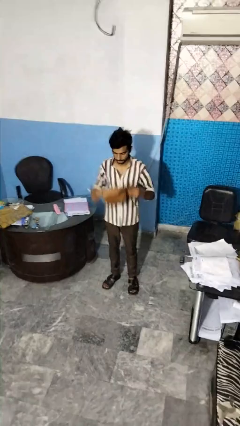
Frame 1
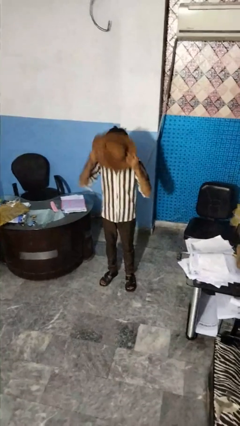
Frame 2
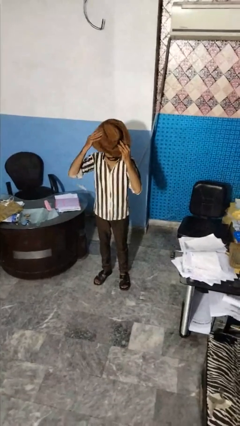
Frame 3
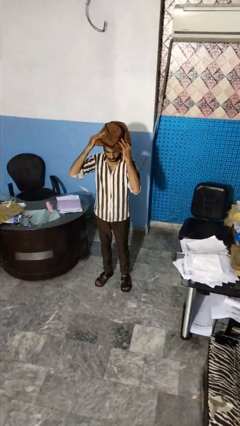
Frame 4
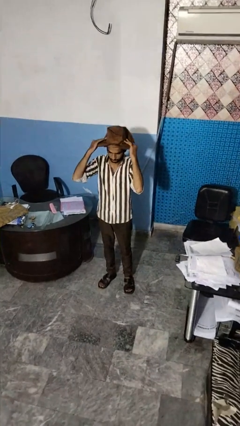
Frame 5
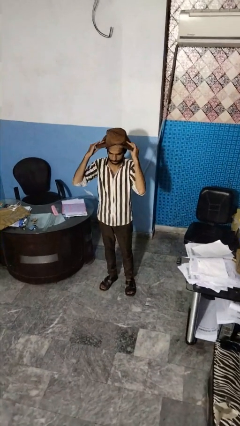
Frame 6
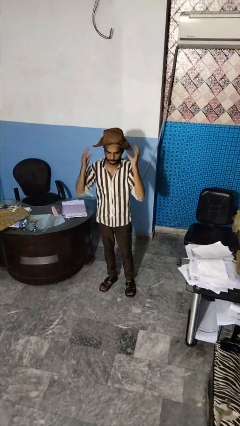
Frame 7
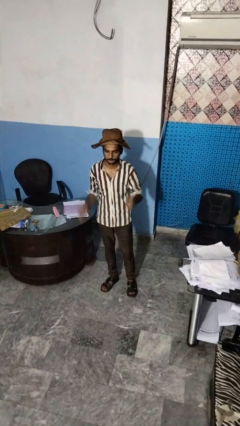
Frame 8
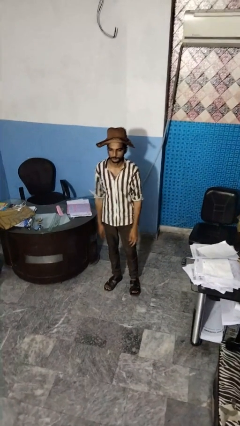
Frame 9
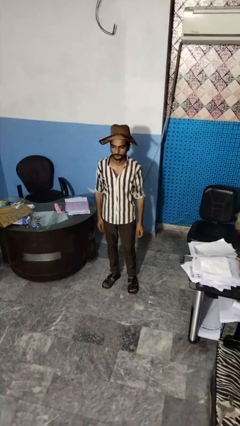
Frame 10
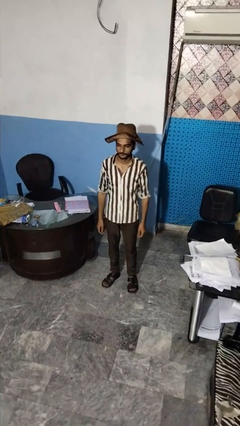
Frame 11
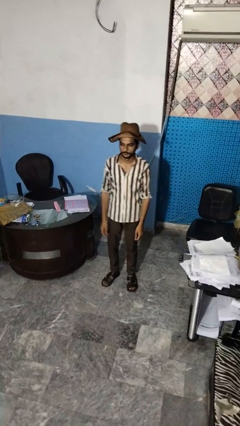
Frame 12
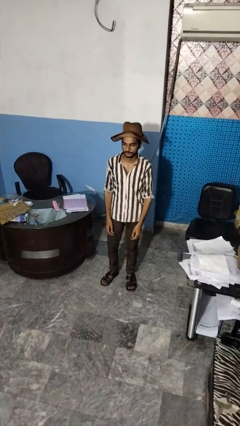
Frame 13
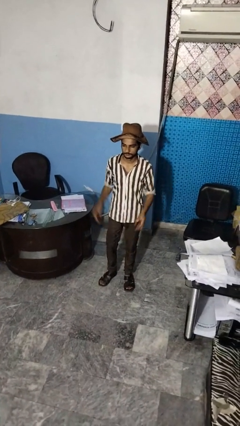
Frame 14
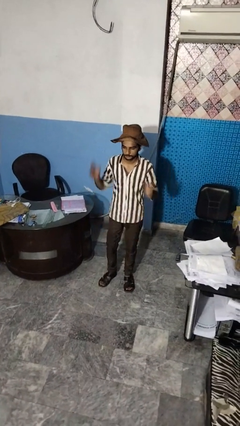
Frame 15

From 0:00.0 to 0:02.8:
person puts on hat

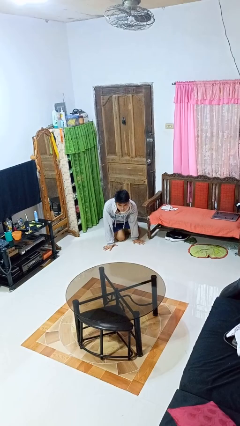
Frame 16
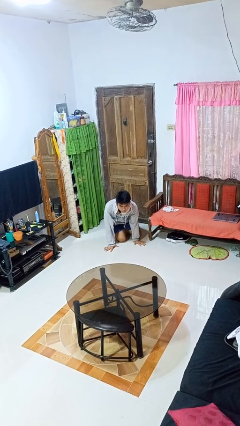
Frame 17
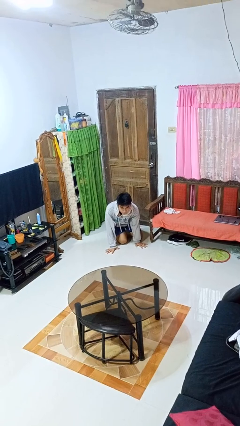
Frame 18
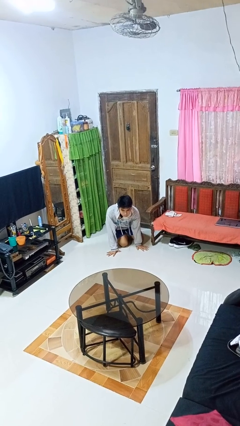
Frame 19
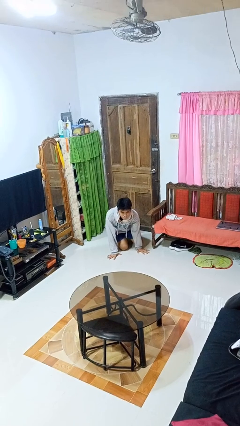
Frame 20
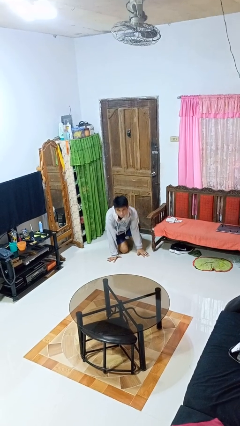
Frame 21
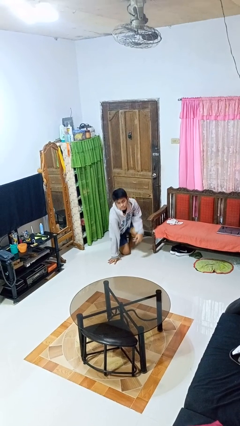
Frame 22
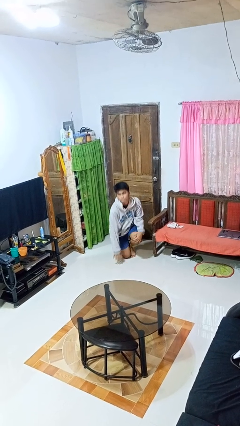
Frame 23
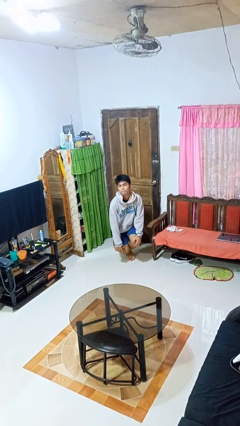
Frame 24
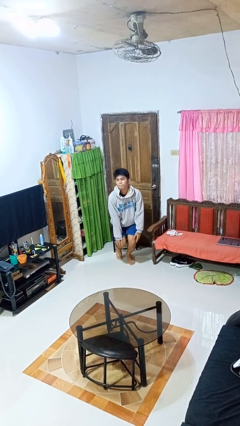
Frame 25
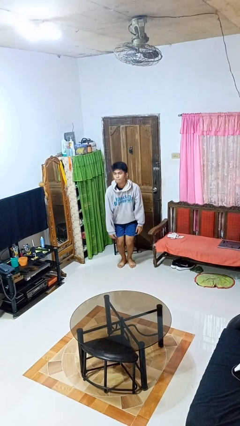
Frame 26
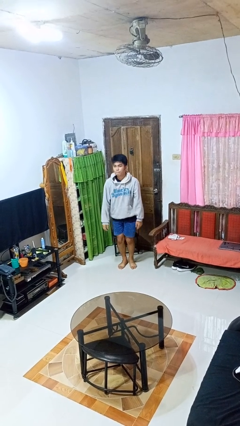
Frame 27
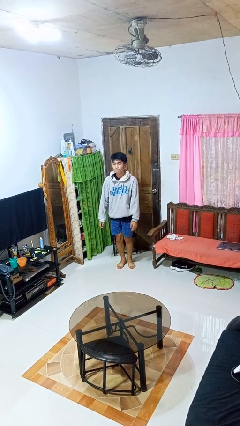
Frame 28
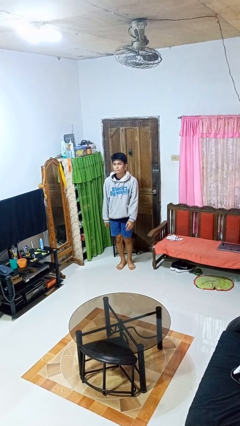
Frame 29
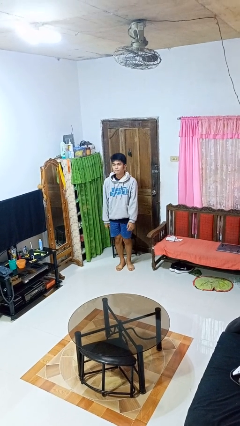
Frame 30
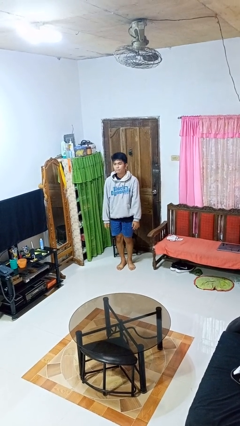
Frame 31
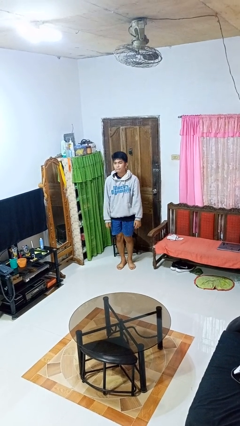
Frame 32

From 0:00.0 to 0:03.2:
person stands up from floor

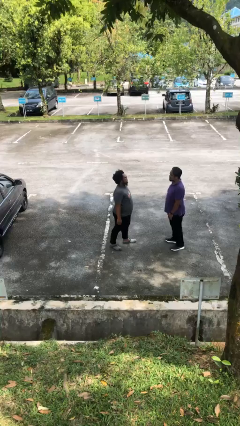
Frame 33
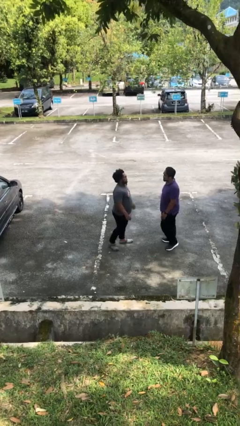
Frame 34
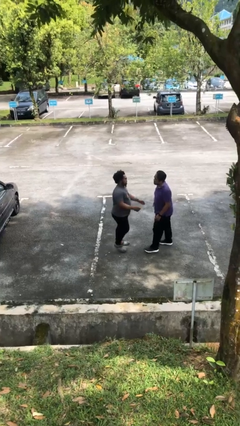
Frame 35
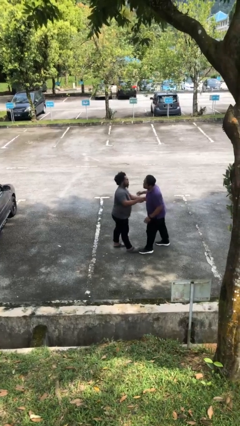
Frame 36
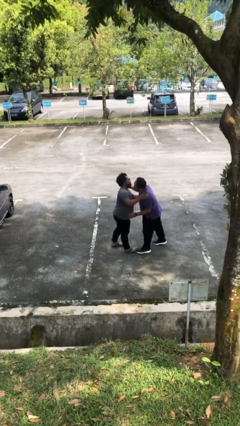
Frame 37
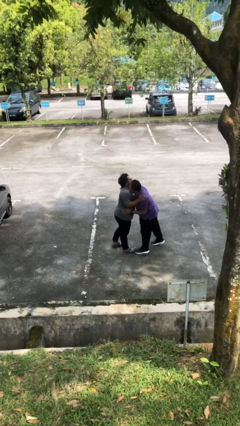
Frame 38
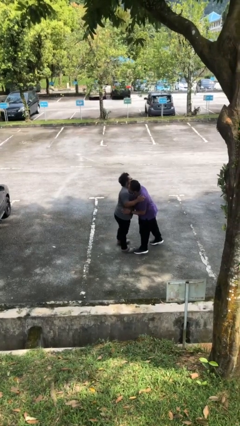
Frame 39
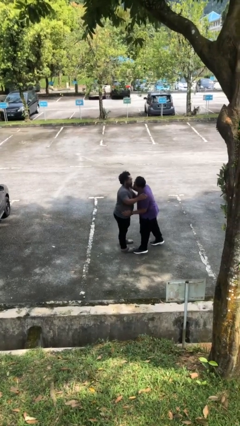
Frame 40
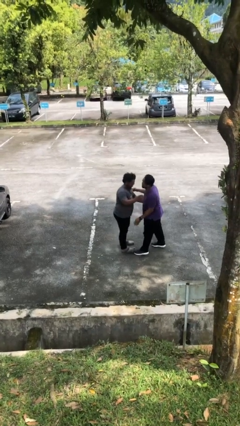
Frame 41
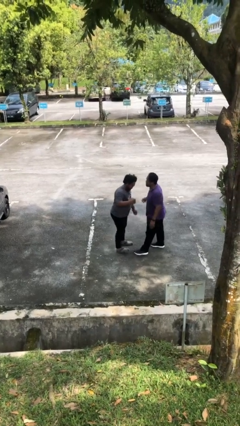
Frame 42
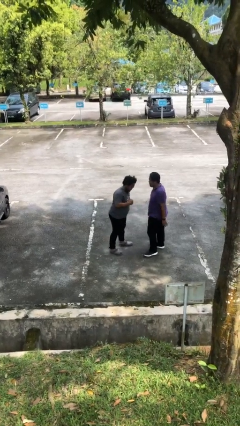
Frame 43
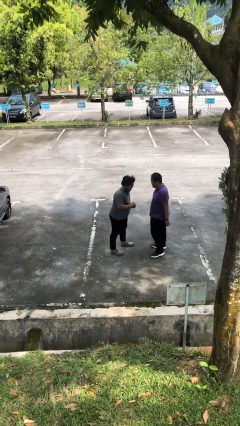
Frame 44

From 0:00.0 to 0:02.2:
person embraces person

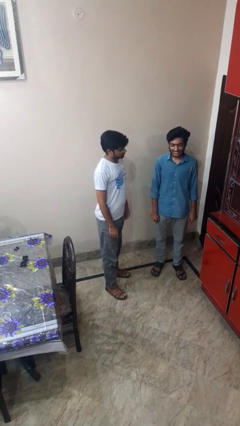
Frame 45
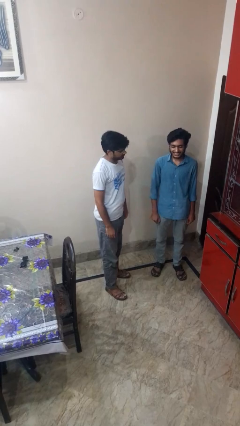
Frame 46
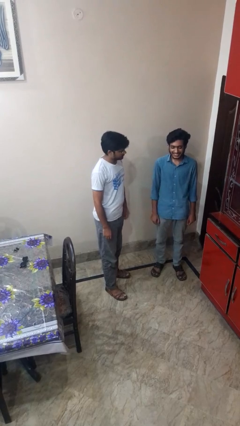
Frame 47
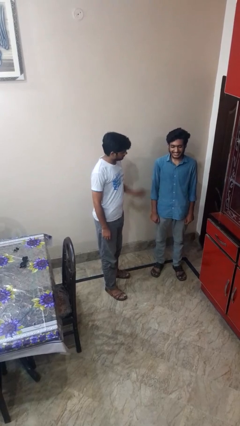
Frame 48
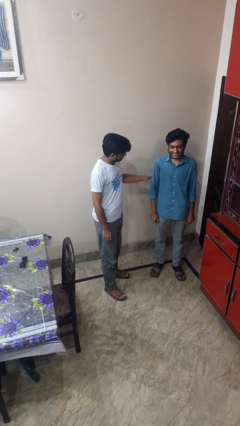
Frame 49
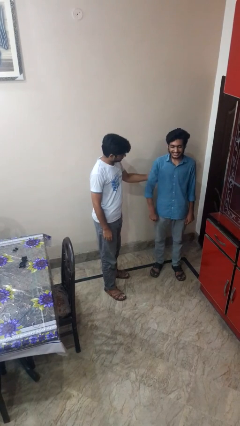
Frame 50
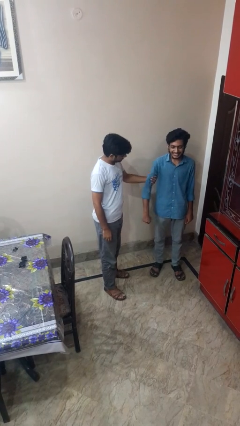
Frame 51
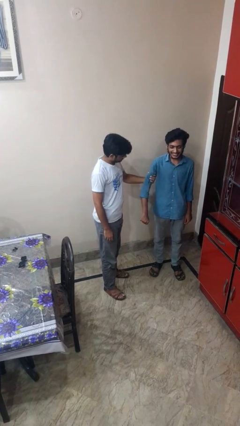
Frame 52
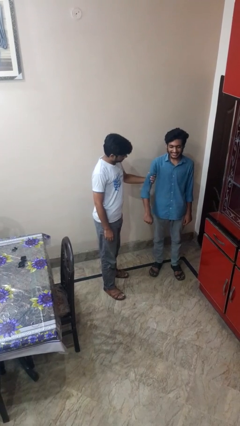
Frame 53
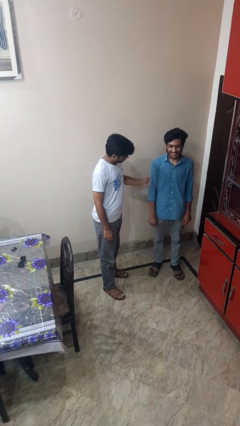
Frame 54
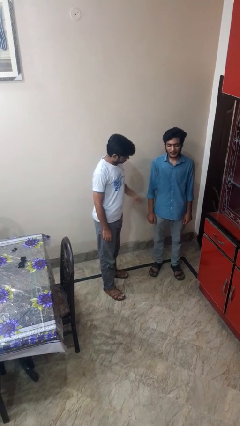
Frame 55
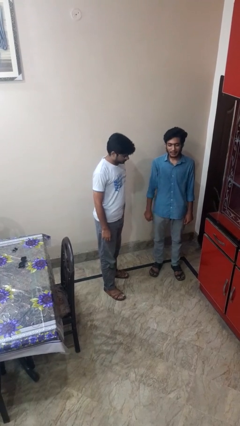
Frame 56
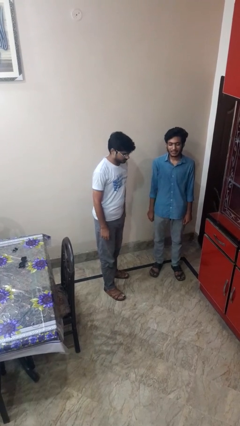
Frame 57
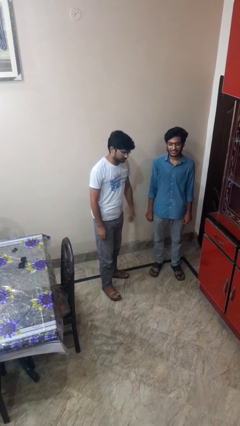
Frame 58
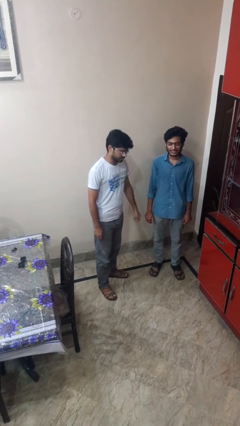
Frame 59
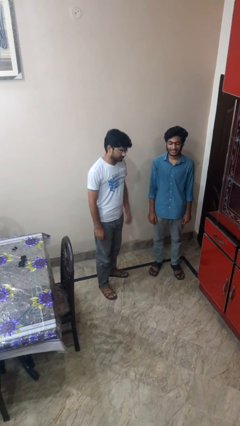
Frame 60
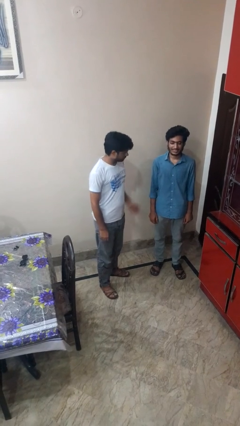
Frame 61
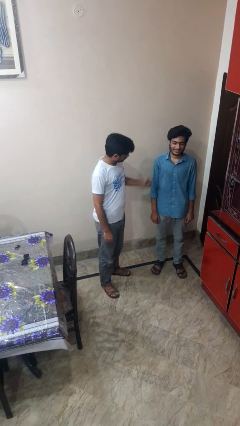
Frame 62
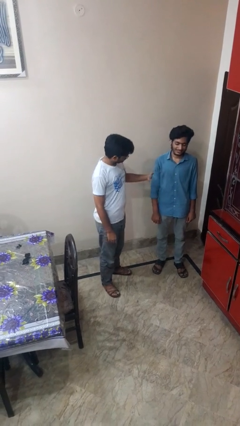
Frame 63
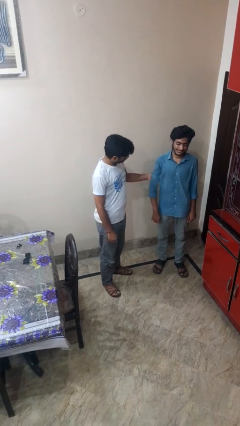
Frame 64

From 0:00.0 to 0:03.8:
person searches in backpack

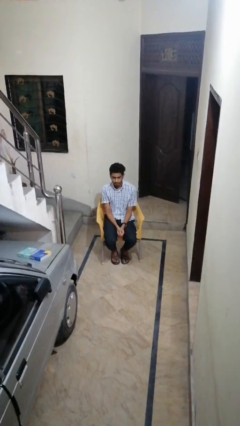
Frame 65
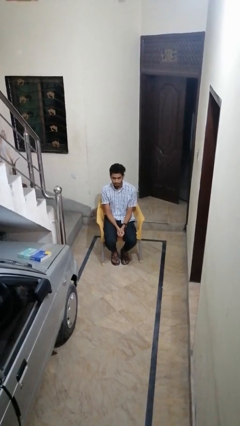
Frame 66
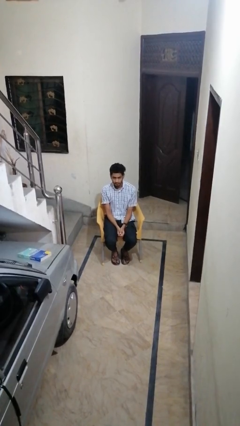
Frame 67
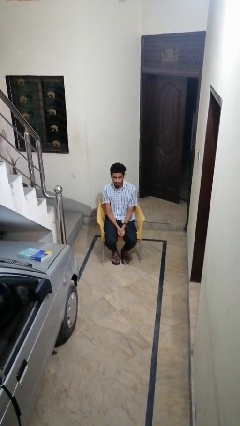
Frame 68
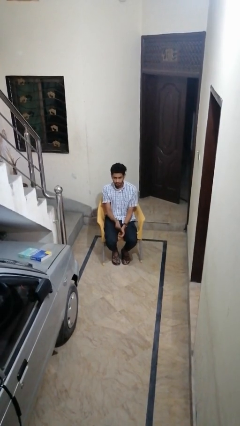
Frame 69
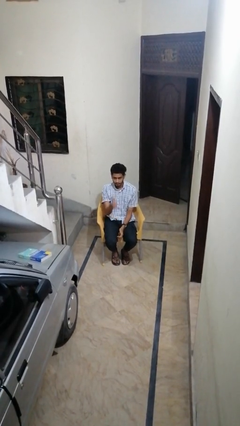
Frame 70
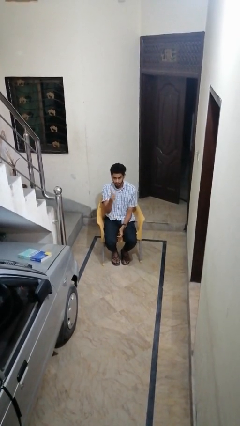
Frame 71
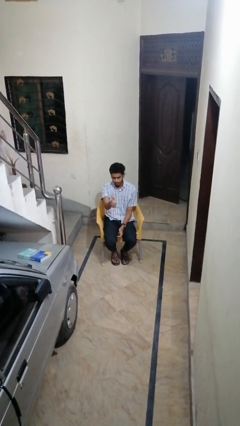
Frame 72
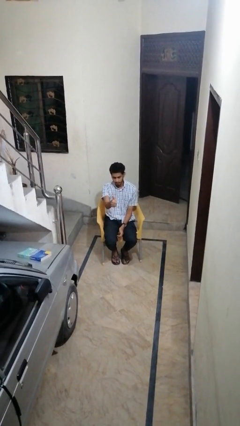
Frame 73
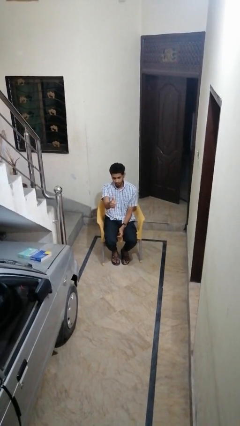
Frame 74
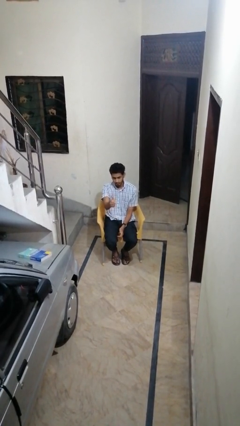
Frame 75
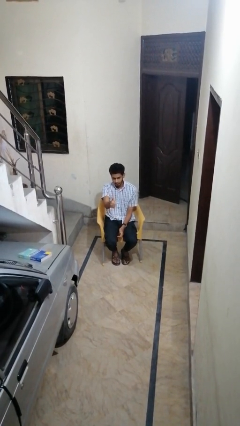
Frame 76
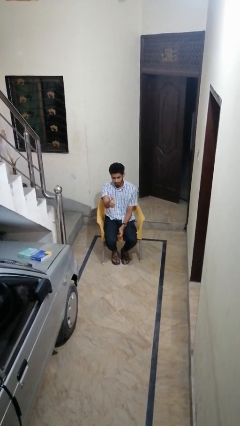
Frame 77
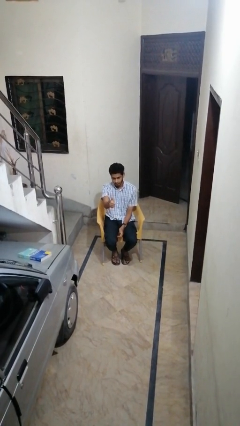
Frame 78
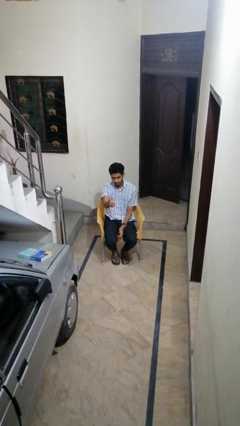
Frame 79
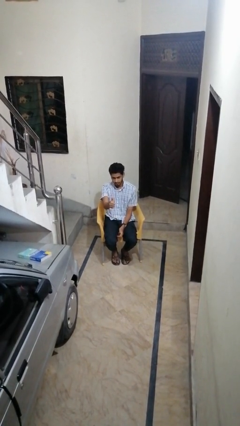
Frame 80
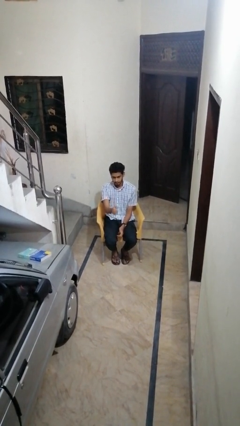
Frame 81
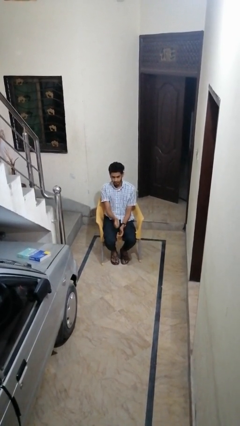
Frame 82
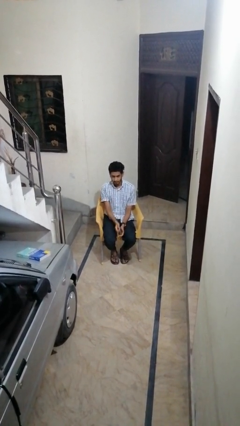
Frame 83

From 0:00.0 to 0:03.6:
person gestures thumbs up

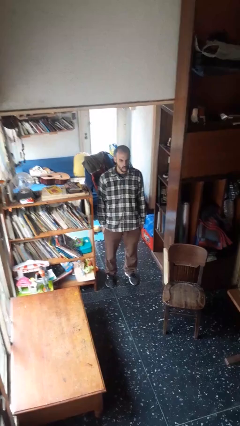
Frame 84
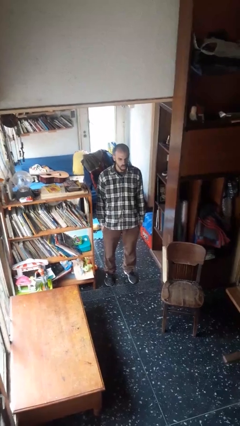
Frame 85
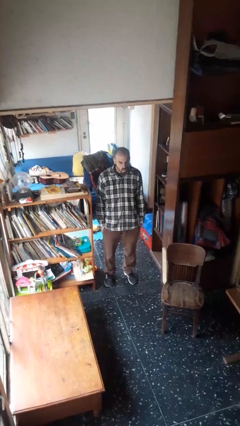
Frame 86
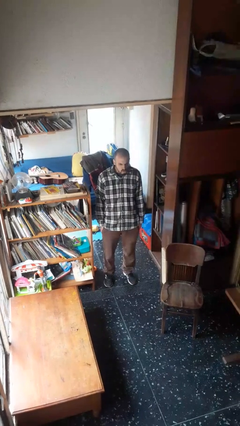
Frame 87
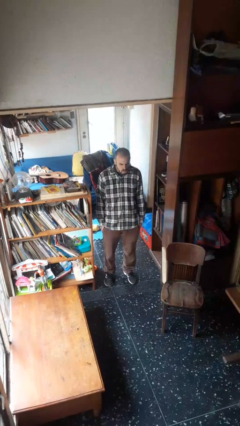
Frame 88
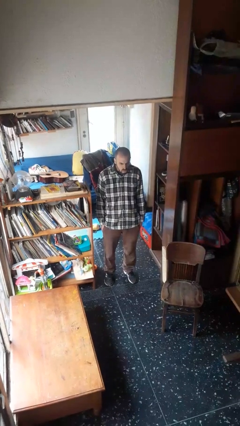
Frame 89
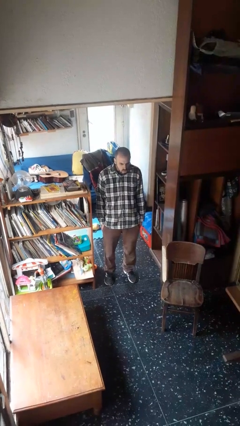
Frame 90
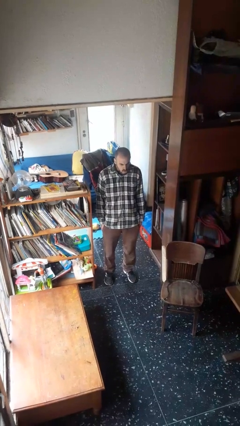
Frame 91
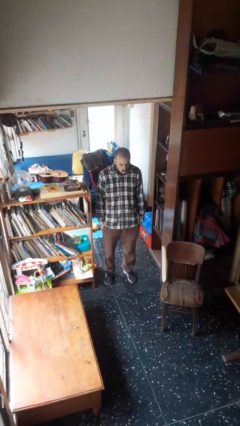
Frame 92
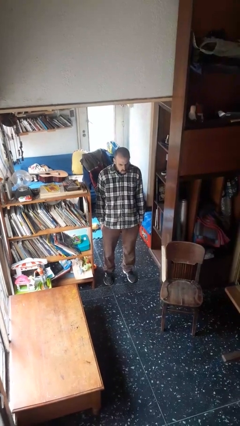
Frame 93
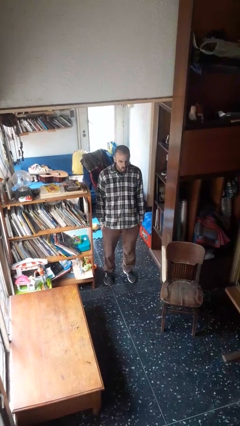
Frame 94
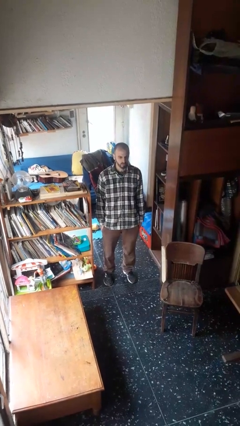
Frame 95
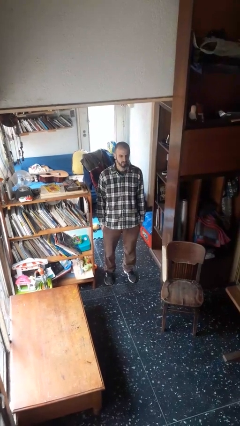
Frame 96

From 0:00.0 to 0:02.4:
person sticks out tongue
